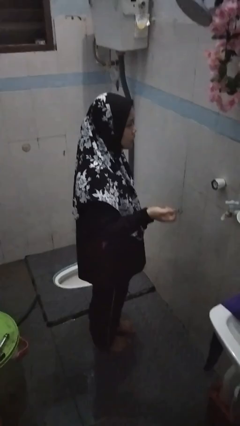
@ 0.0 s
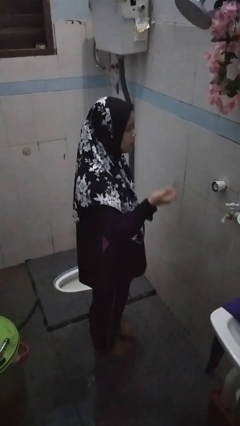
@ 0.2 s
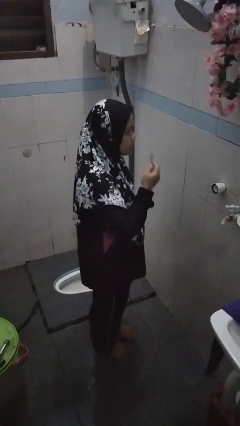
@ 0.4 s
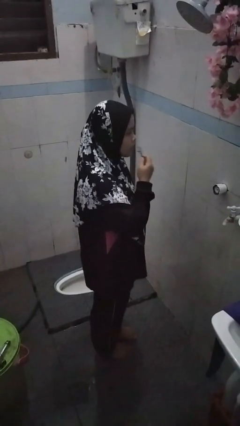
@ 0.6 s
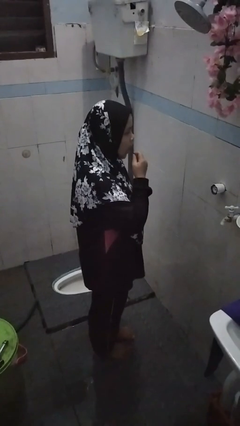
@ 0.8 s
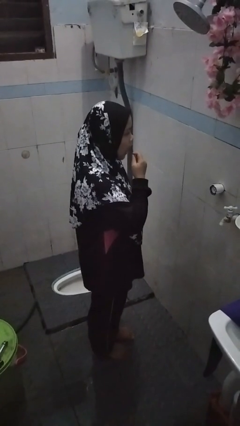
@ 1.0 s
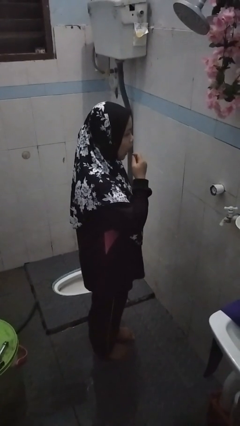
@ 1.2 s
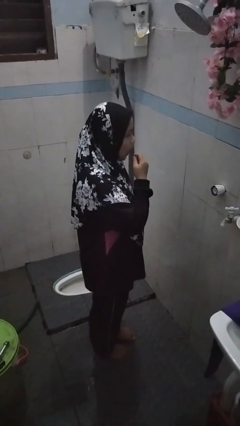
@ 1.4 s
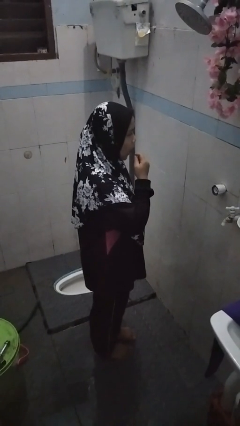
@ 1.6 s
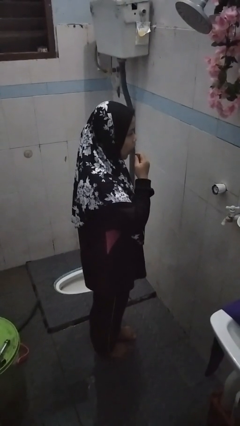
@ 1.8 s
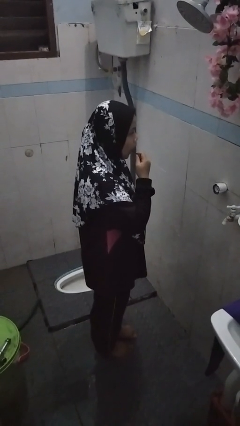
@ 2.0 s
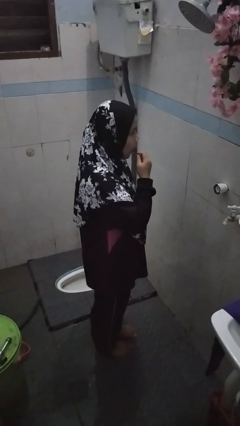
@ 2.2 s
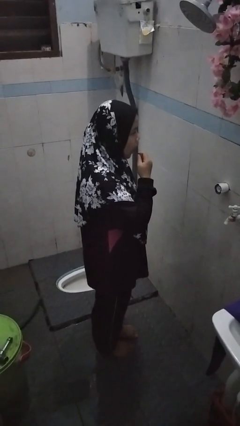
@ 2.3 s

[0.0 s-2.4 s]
person flosses

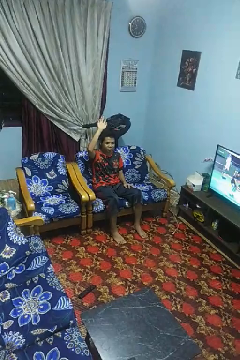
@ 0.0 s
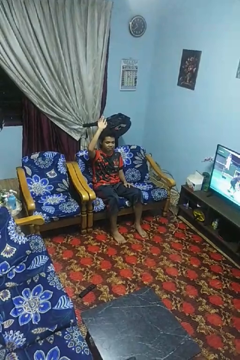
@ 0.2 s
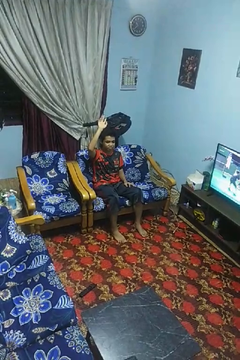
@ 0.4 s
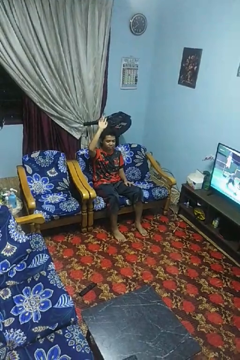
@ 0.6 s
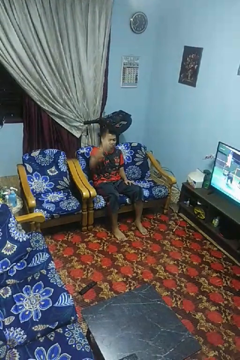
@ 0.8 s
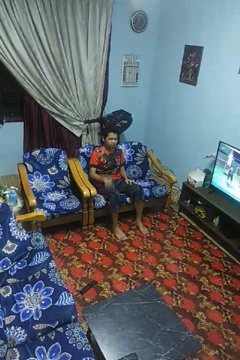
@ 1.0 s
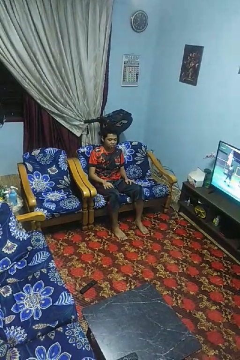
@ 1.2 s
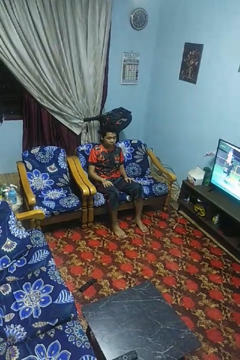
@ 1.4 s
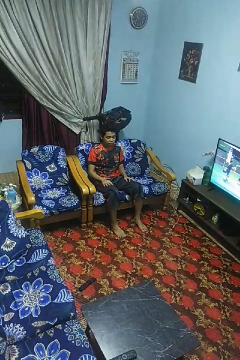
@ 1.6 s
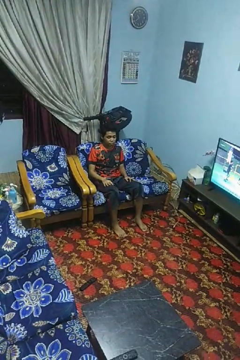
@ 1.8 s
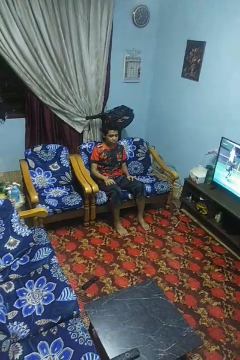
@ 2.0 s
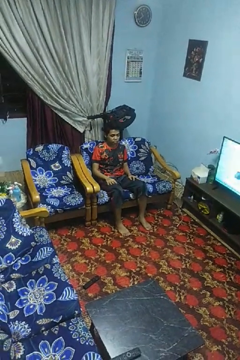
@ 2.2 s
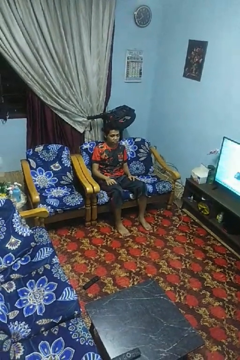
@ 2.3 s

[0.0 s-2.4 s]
person gestures lower hand

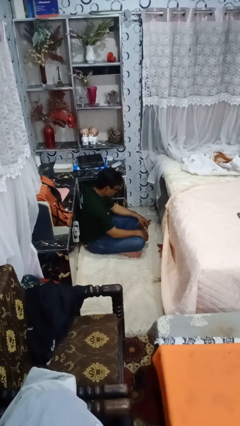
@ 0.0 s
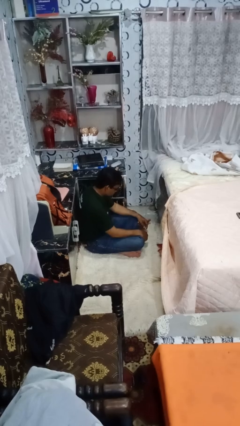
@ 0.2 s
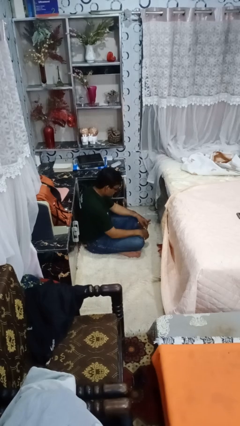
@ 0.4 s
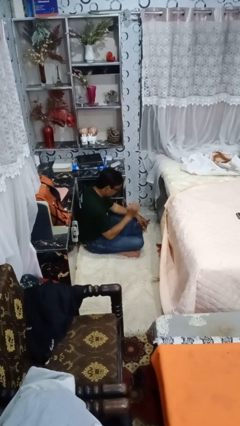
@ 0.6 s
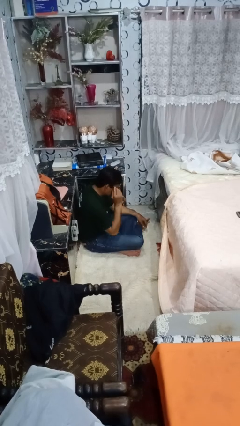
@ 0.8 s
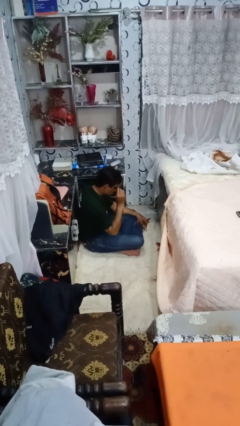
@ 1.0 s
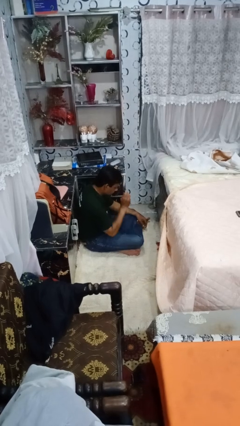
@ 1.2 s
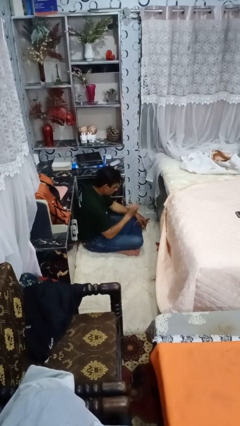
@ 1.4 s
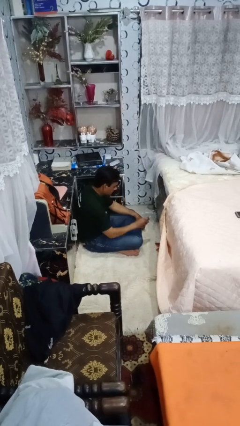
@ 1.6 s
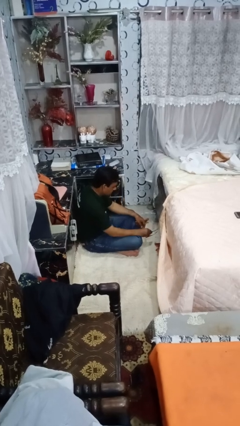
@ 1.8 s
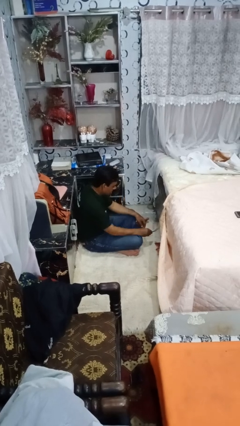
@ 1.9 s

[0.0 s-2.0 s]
person takes off glasses

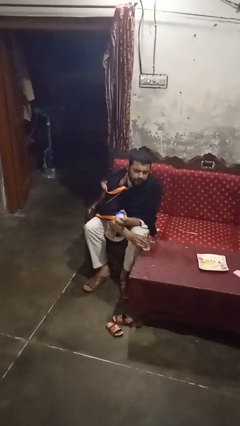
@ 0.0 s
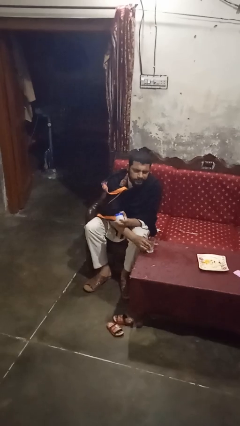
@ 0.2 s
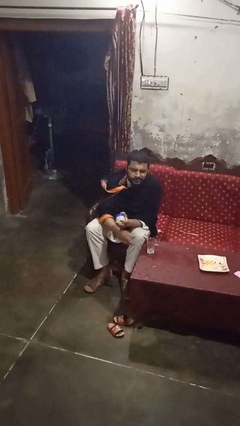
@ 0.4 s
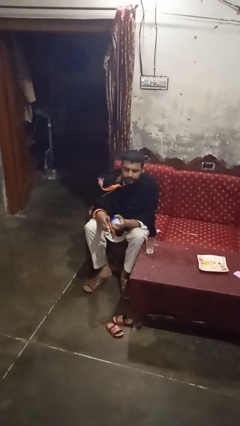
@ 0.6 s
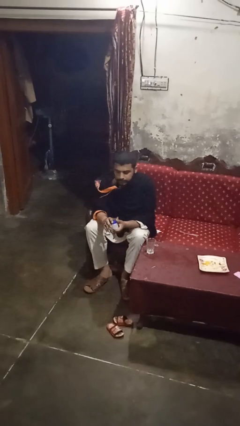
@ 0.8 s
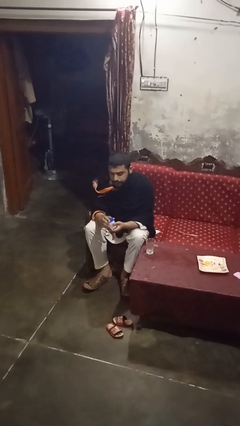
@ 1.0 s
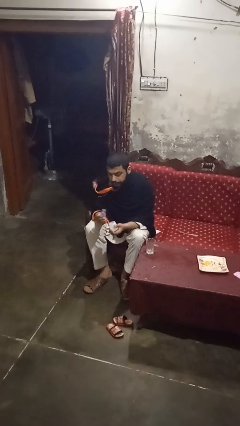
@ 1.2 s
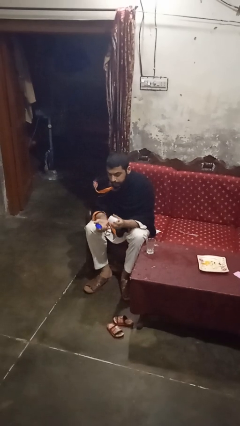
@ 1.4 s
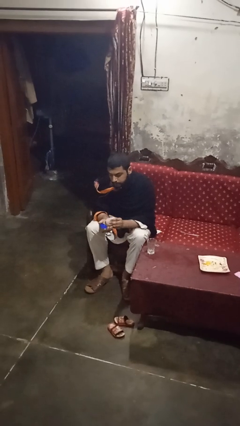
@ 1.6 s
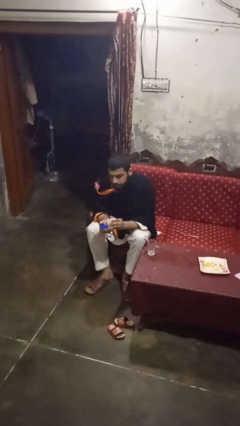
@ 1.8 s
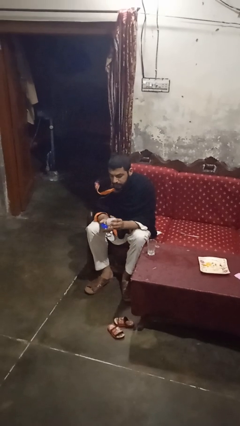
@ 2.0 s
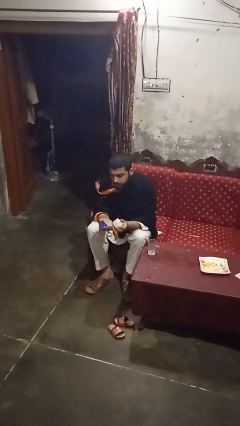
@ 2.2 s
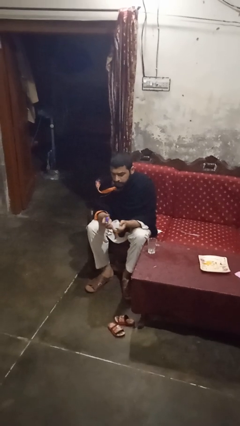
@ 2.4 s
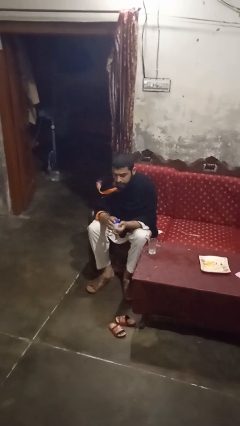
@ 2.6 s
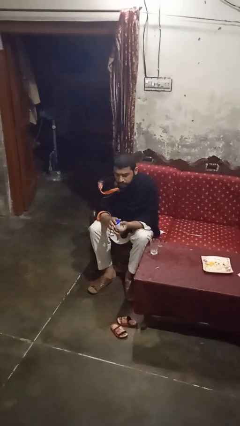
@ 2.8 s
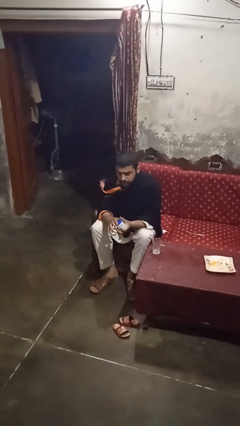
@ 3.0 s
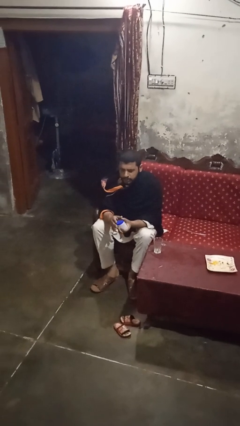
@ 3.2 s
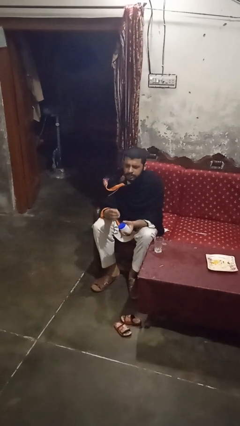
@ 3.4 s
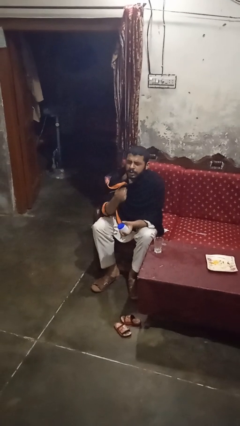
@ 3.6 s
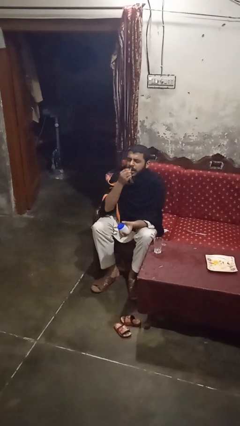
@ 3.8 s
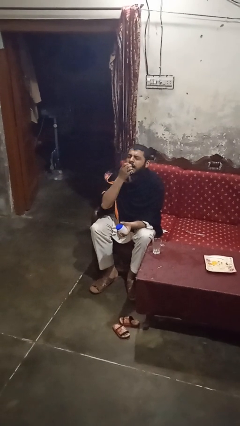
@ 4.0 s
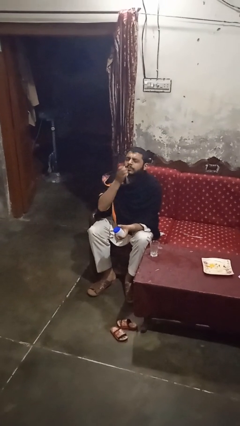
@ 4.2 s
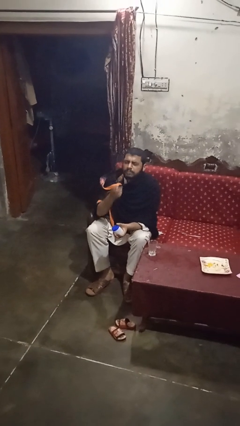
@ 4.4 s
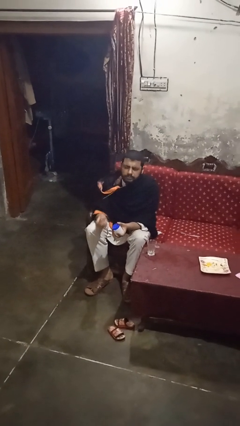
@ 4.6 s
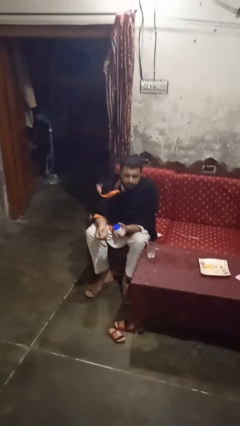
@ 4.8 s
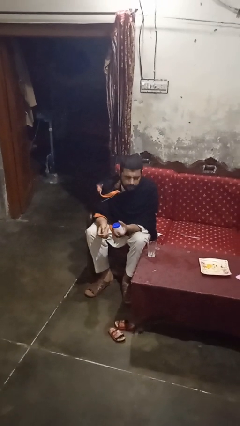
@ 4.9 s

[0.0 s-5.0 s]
person takes medicine pills

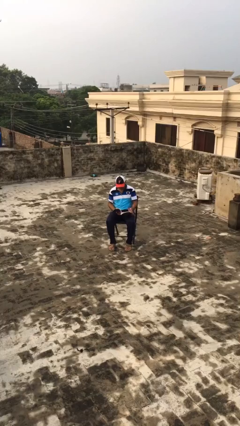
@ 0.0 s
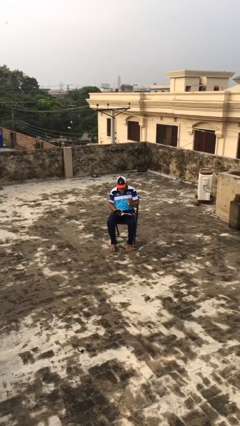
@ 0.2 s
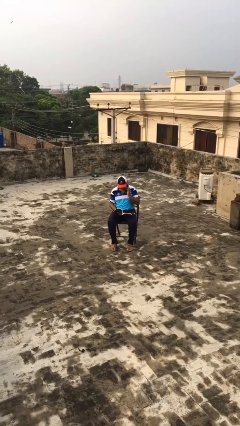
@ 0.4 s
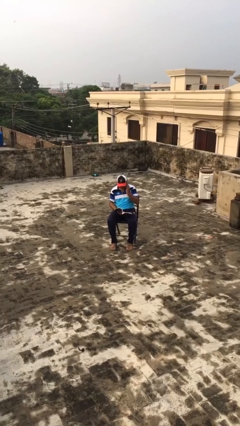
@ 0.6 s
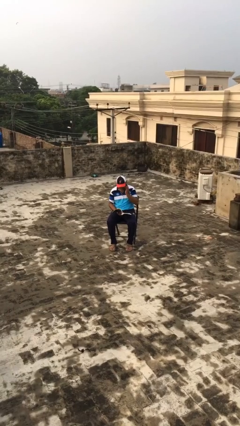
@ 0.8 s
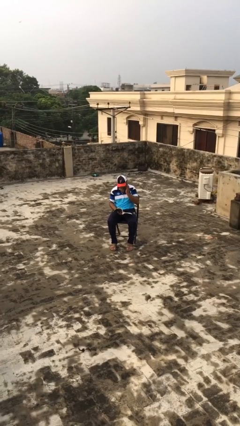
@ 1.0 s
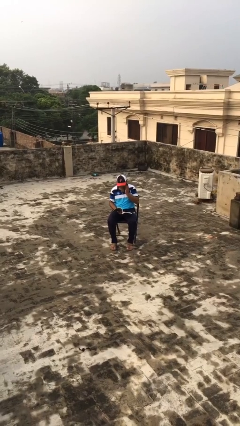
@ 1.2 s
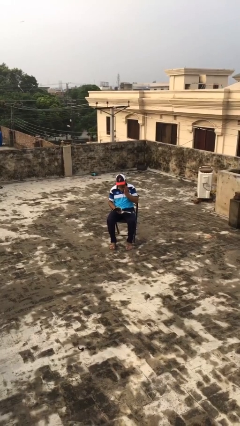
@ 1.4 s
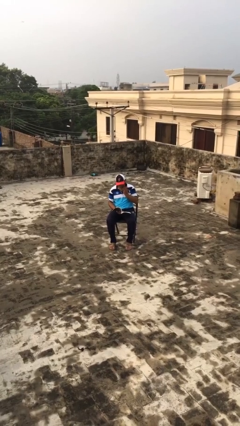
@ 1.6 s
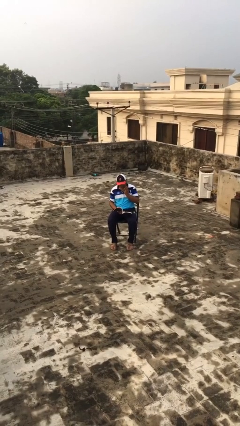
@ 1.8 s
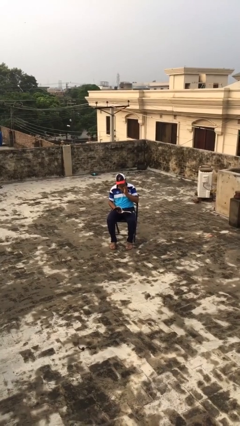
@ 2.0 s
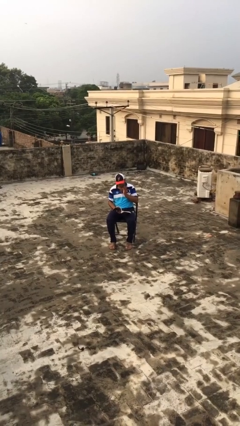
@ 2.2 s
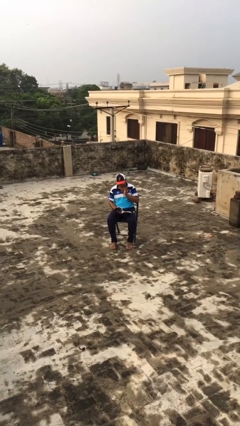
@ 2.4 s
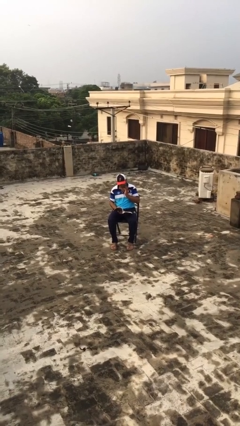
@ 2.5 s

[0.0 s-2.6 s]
person reads document

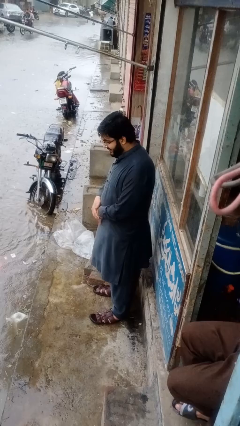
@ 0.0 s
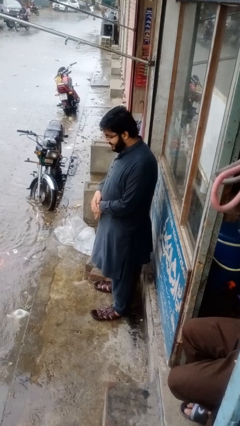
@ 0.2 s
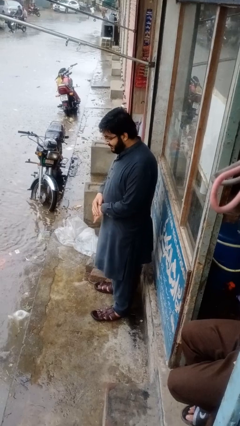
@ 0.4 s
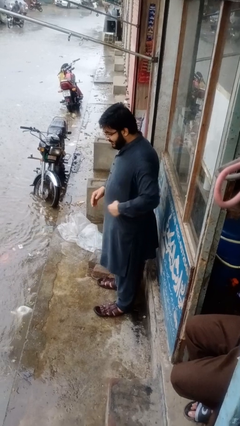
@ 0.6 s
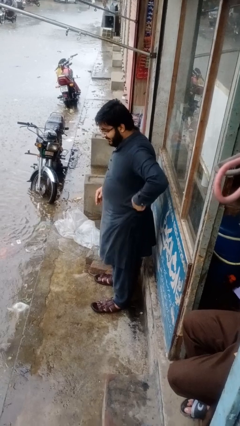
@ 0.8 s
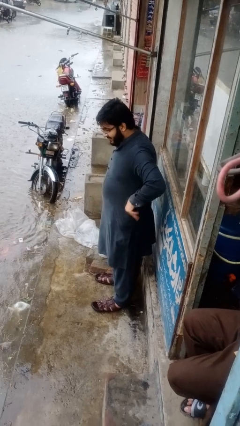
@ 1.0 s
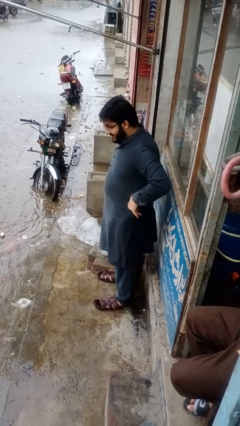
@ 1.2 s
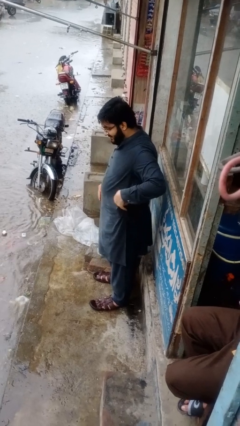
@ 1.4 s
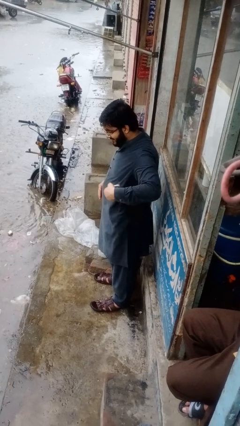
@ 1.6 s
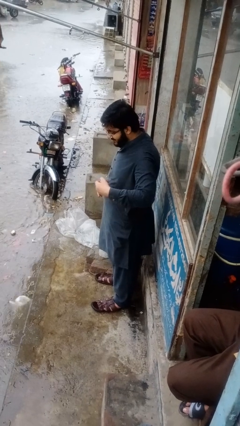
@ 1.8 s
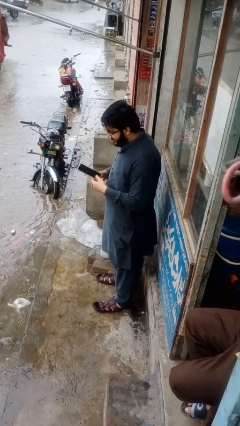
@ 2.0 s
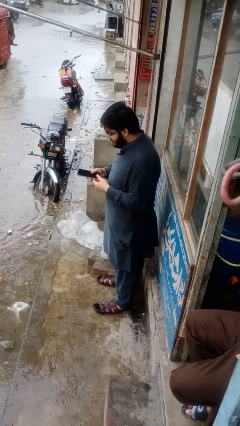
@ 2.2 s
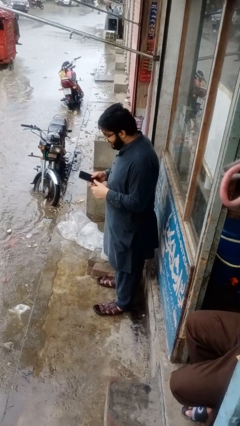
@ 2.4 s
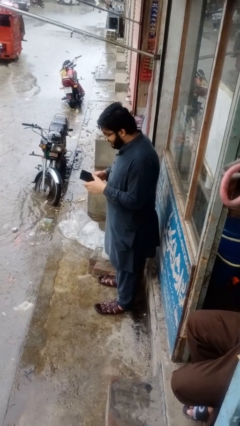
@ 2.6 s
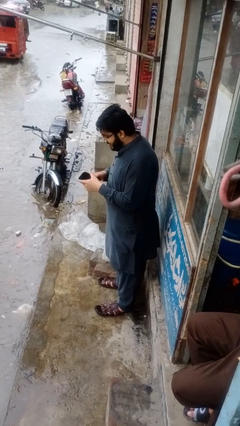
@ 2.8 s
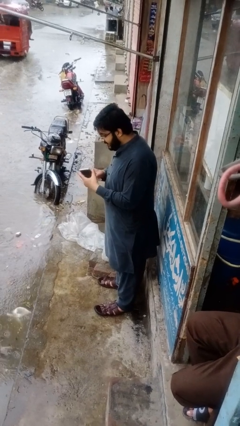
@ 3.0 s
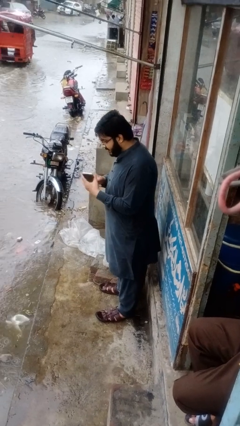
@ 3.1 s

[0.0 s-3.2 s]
person takes phone from pocket

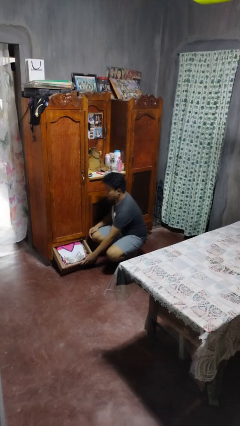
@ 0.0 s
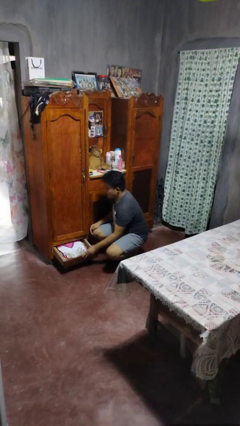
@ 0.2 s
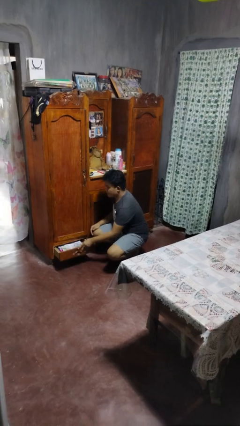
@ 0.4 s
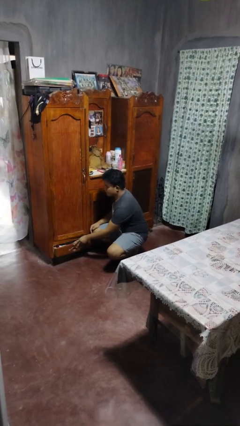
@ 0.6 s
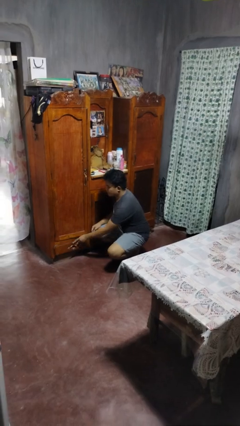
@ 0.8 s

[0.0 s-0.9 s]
person closes dresser drawer
